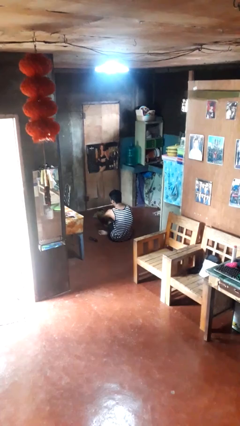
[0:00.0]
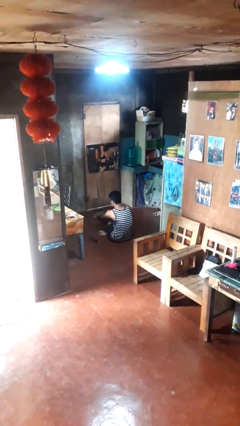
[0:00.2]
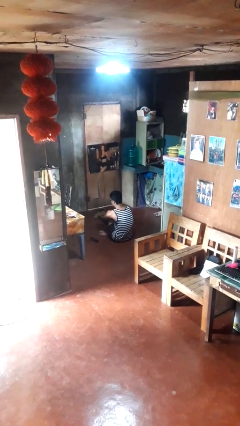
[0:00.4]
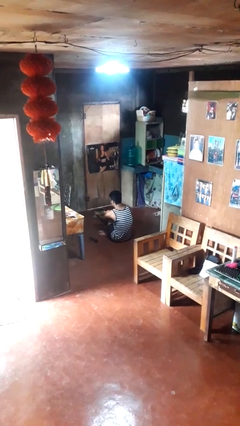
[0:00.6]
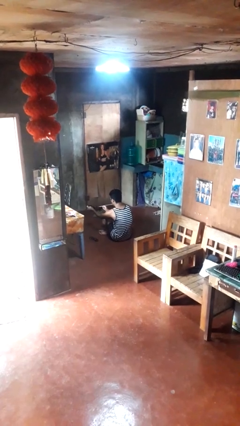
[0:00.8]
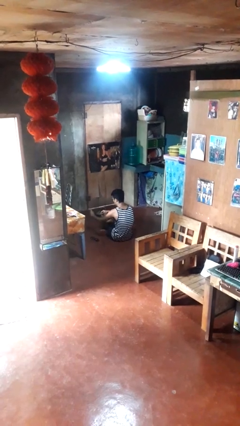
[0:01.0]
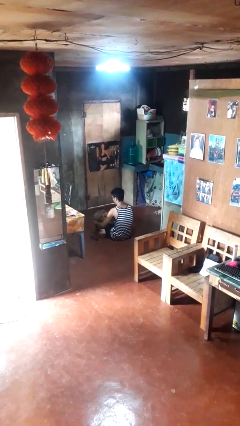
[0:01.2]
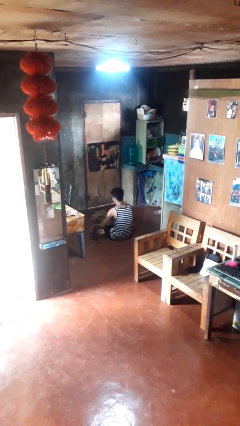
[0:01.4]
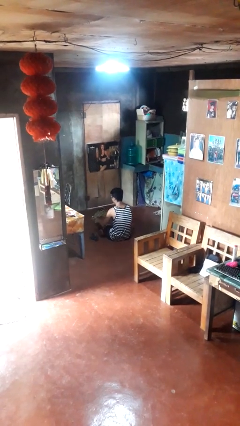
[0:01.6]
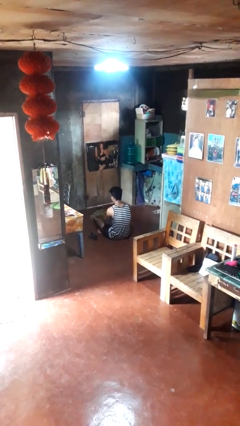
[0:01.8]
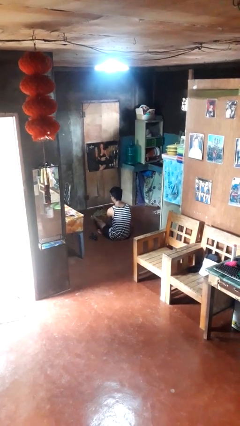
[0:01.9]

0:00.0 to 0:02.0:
person takes off socks

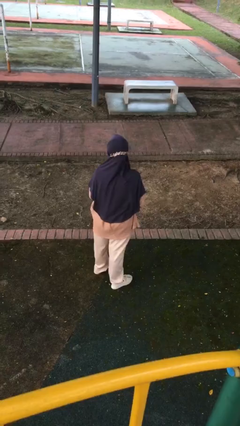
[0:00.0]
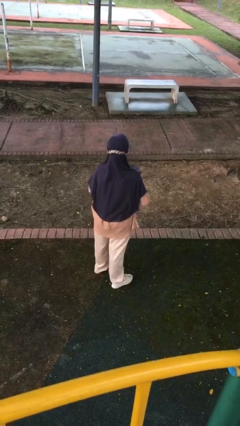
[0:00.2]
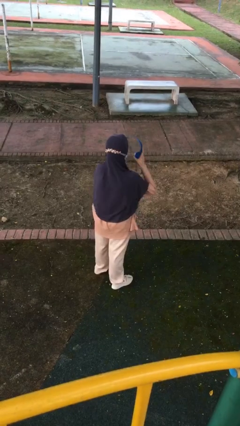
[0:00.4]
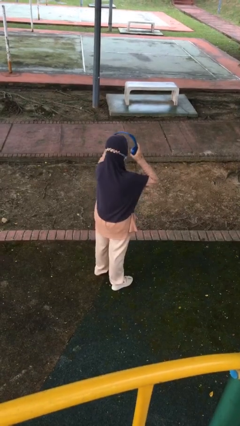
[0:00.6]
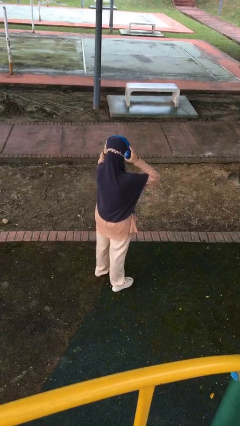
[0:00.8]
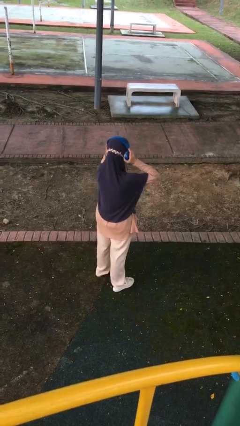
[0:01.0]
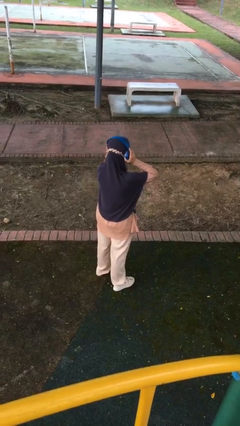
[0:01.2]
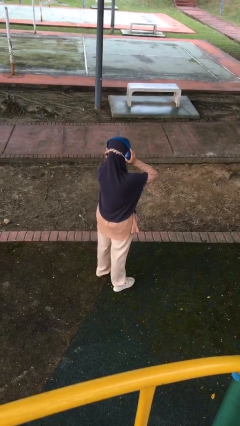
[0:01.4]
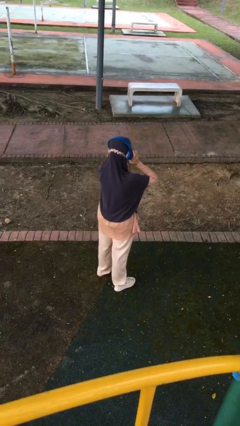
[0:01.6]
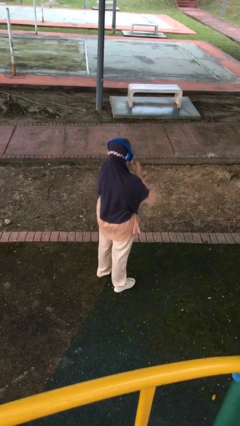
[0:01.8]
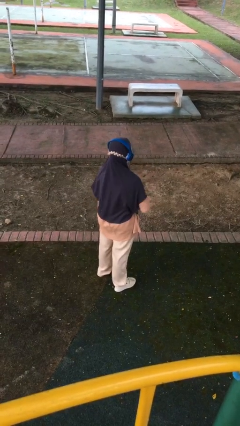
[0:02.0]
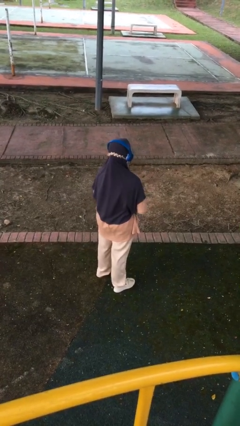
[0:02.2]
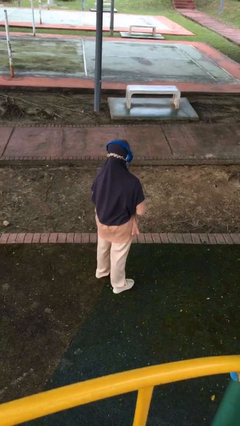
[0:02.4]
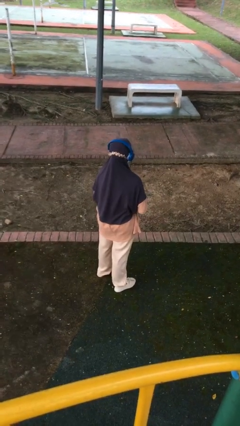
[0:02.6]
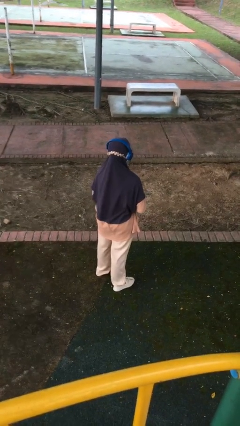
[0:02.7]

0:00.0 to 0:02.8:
person puts on headphones

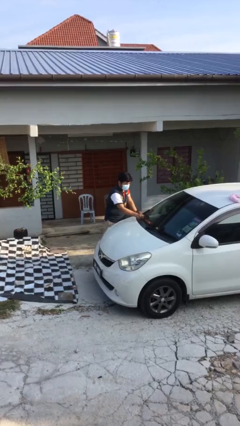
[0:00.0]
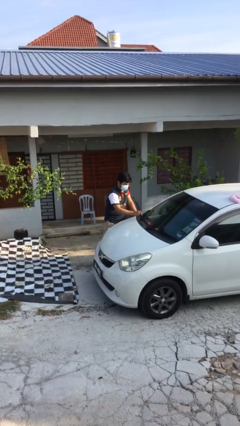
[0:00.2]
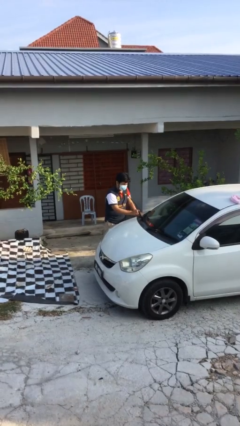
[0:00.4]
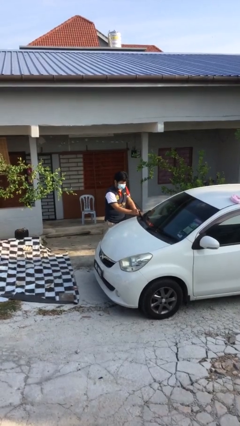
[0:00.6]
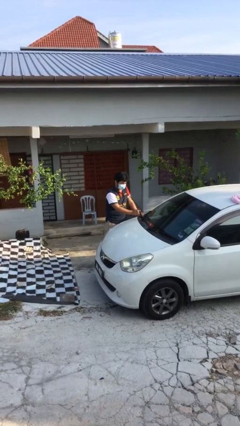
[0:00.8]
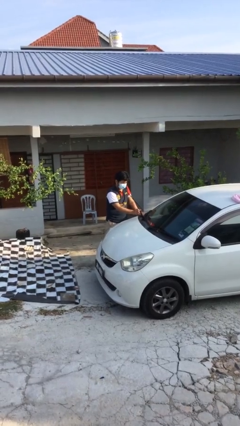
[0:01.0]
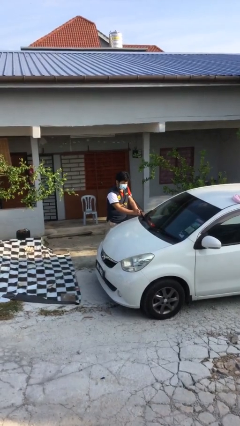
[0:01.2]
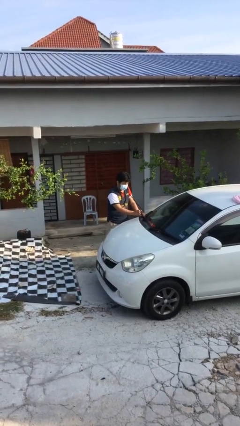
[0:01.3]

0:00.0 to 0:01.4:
person flips up car wipers

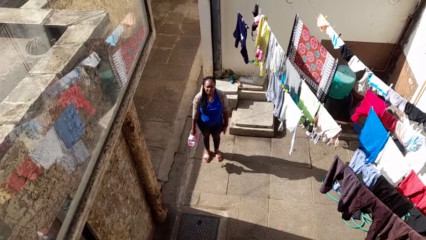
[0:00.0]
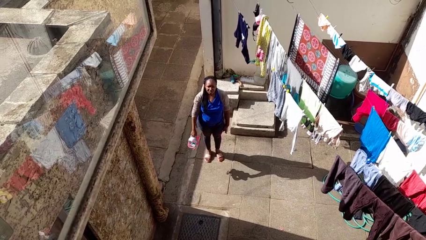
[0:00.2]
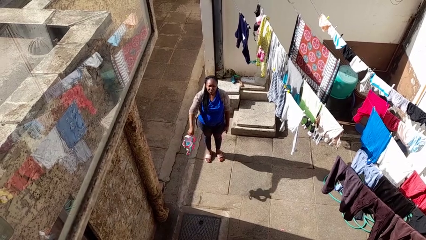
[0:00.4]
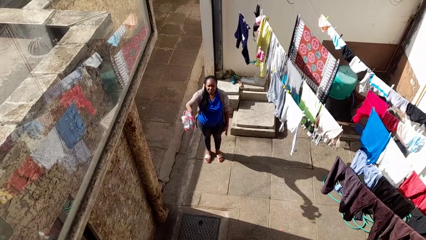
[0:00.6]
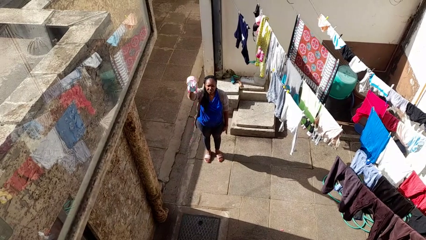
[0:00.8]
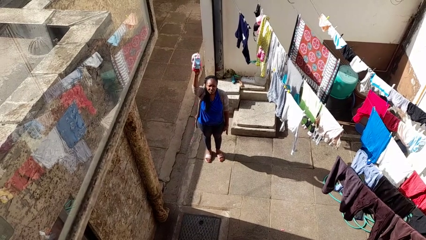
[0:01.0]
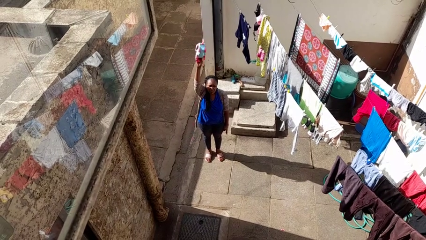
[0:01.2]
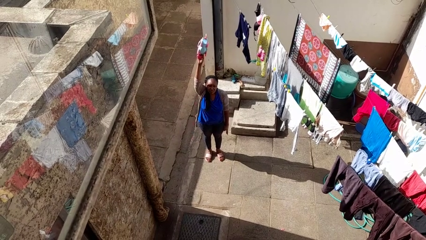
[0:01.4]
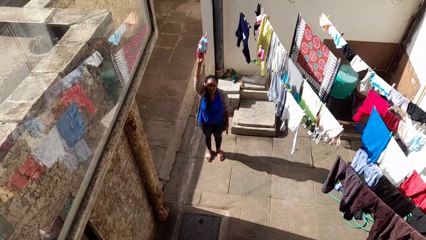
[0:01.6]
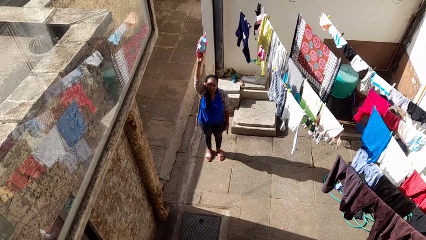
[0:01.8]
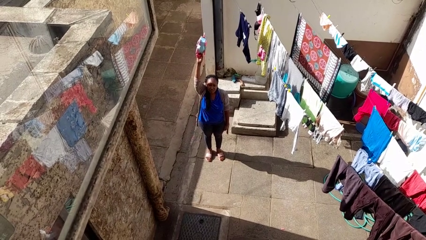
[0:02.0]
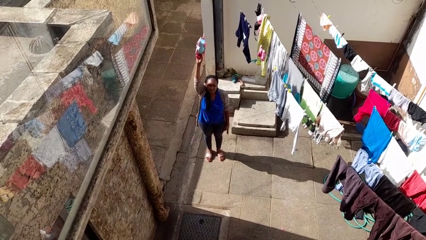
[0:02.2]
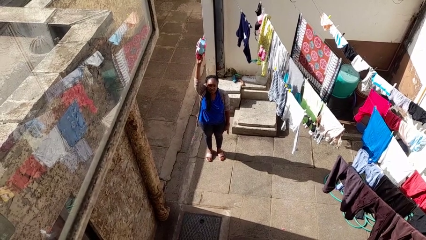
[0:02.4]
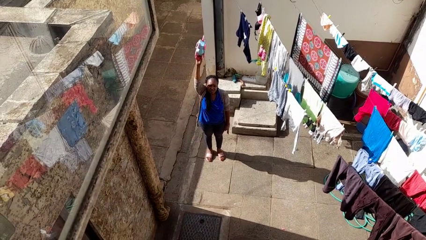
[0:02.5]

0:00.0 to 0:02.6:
person holds object above head

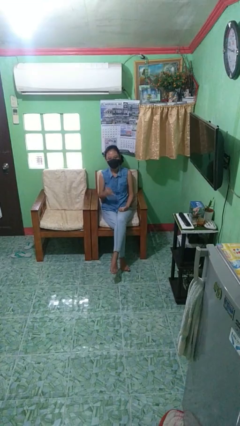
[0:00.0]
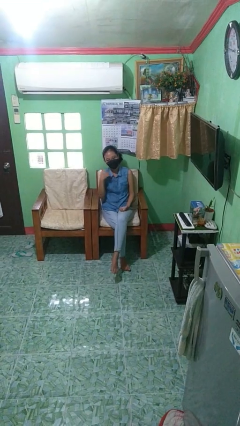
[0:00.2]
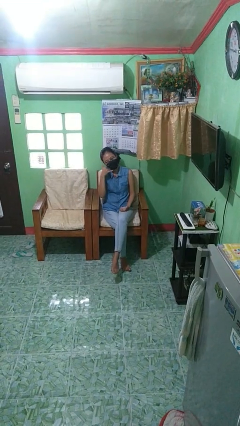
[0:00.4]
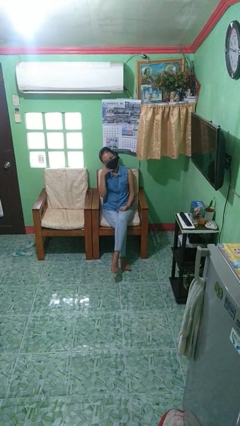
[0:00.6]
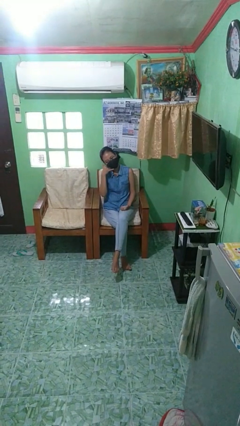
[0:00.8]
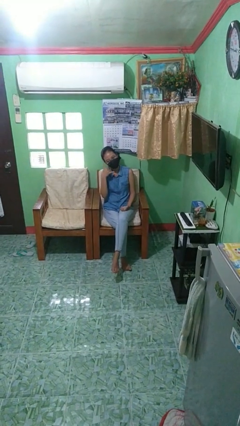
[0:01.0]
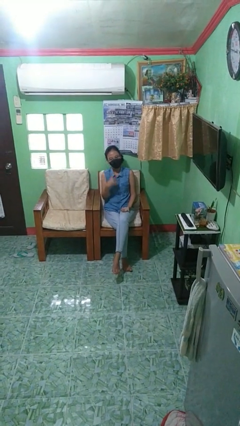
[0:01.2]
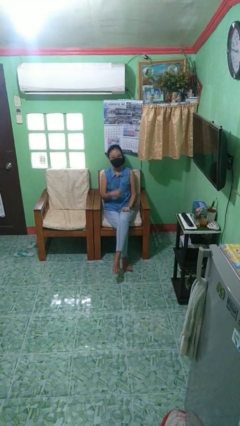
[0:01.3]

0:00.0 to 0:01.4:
person gestures call me

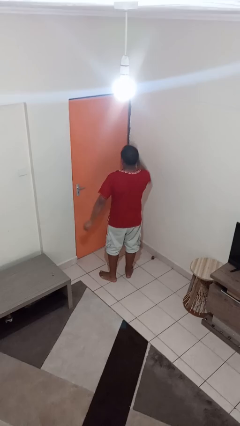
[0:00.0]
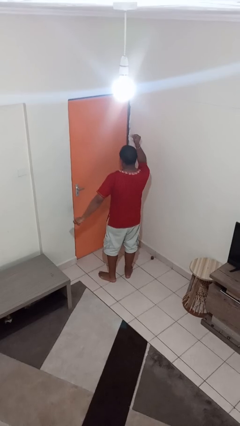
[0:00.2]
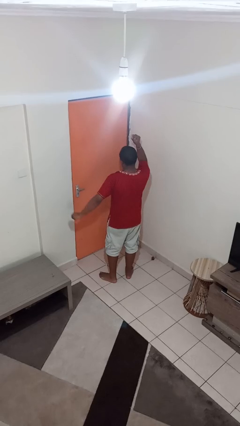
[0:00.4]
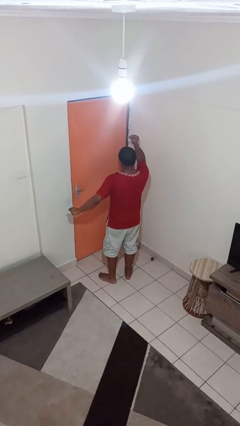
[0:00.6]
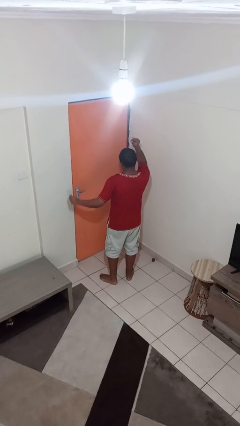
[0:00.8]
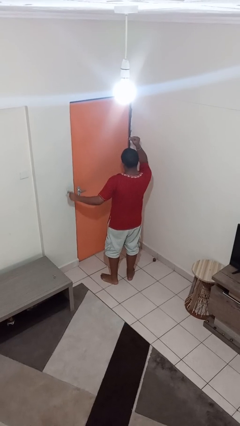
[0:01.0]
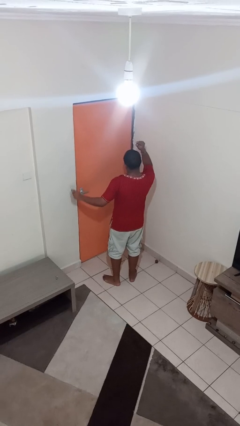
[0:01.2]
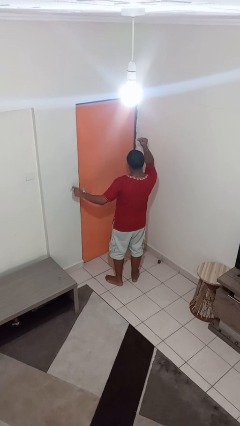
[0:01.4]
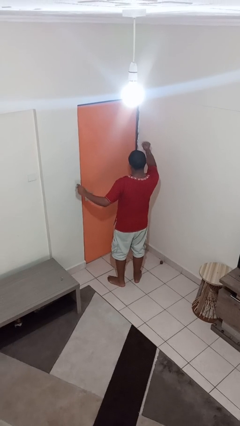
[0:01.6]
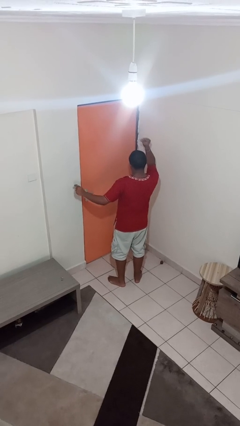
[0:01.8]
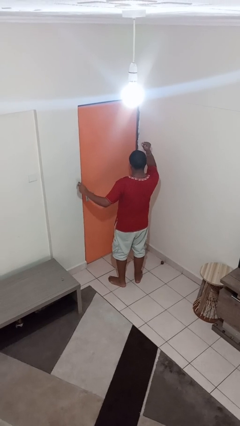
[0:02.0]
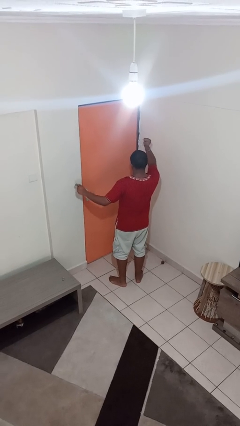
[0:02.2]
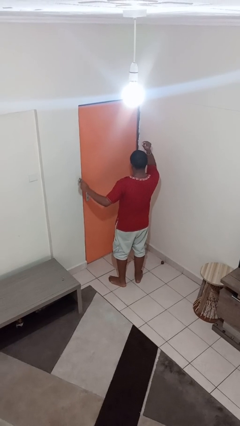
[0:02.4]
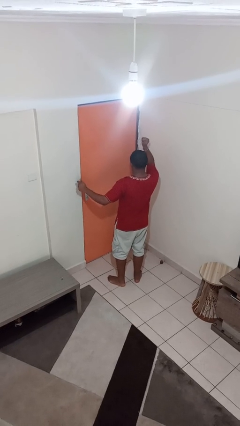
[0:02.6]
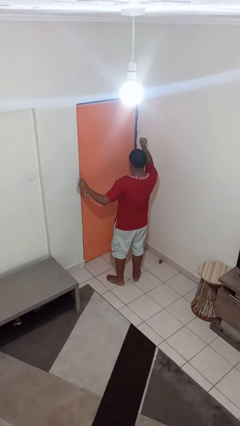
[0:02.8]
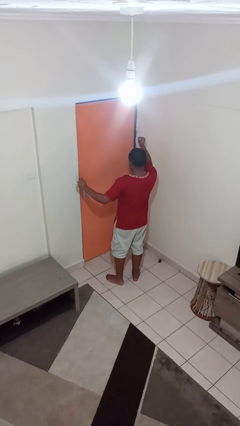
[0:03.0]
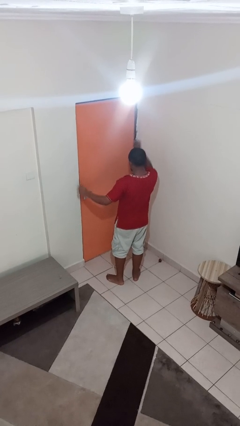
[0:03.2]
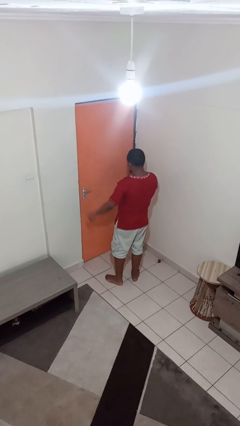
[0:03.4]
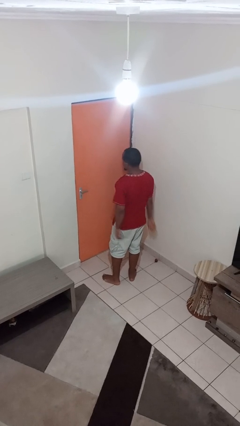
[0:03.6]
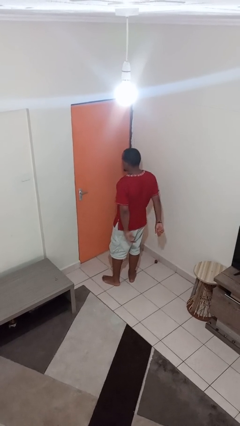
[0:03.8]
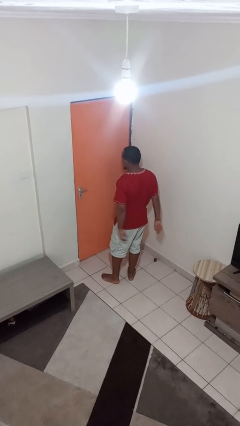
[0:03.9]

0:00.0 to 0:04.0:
person snaps fingers

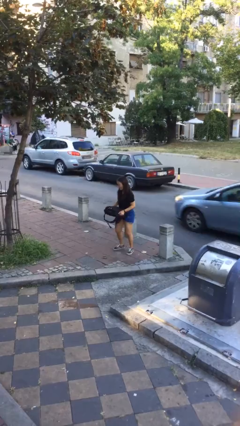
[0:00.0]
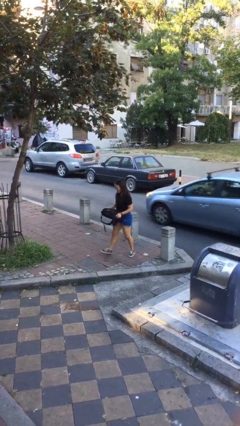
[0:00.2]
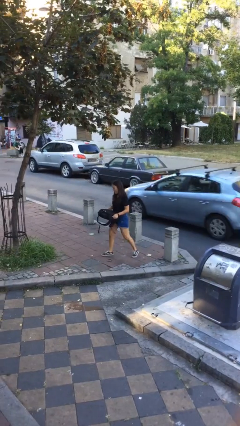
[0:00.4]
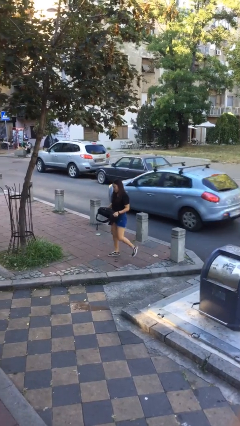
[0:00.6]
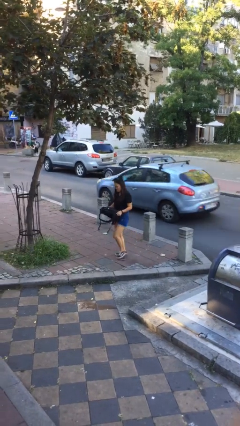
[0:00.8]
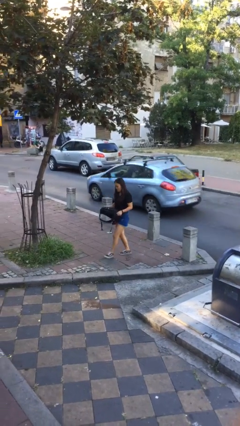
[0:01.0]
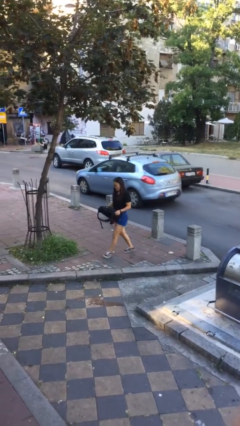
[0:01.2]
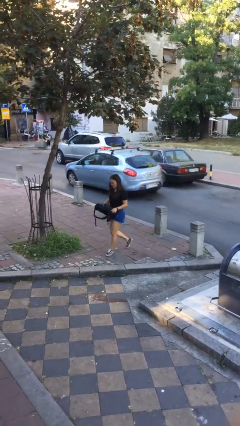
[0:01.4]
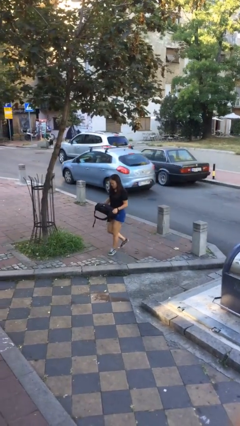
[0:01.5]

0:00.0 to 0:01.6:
person carries heavy object

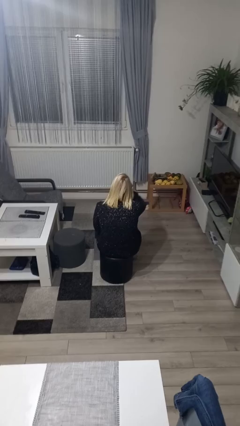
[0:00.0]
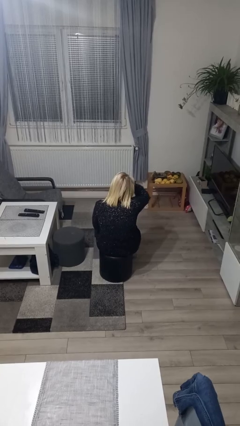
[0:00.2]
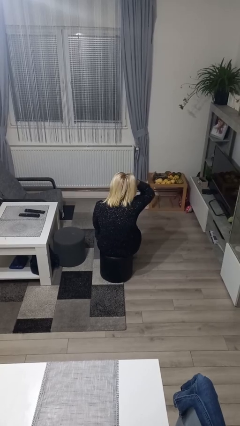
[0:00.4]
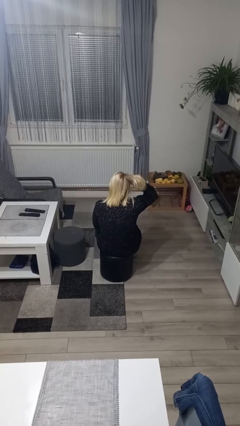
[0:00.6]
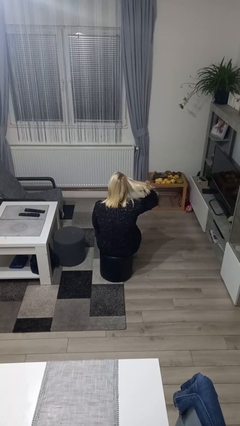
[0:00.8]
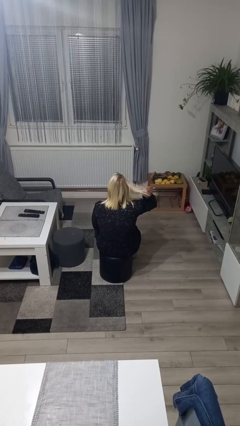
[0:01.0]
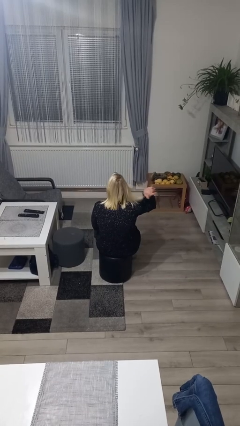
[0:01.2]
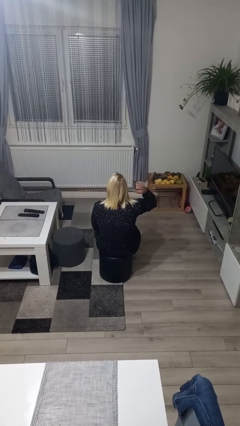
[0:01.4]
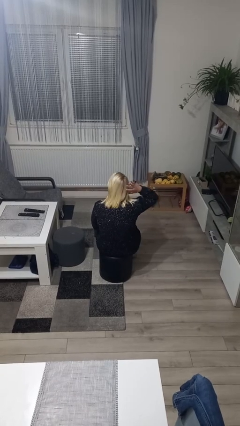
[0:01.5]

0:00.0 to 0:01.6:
person strokes hair
